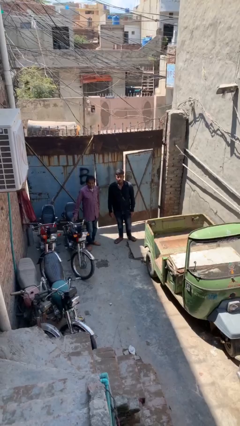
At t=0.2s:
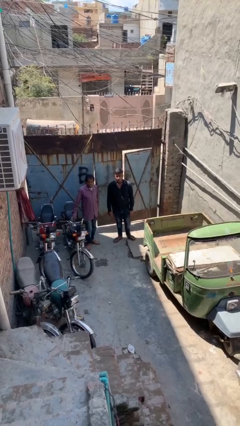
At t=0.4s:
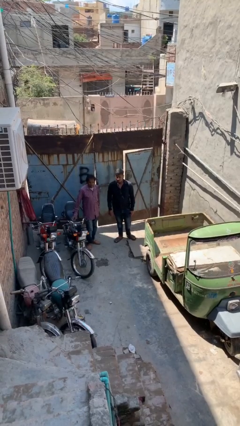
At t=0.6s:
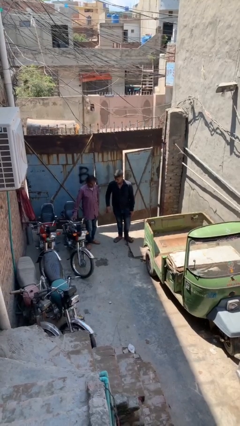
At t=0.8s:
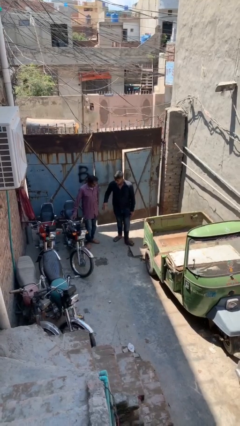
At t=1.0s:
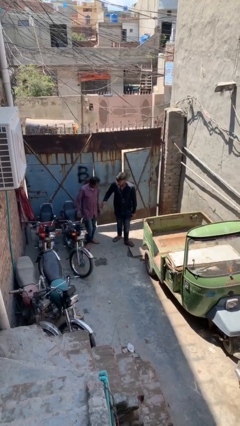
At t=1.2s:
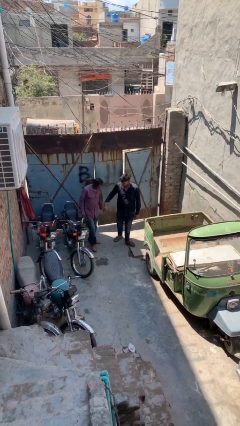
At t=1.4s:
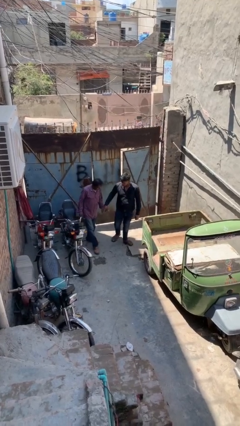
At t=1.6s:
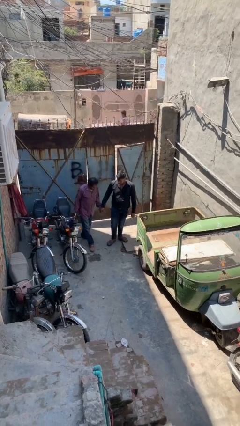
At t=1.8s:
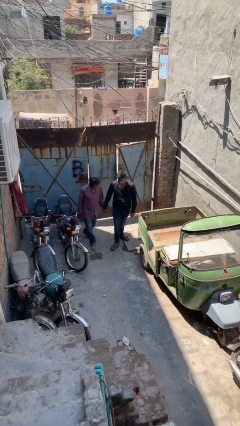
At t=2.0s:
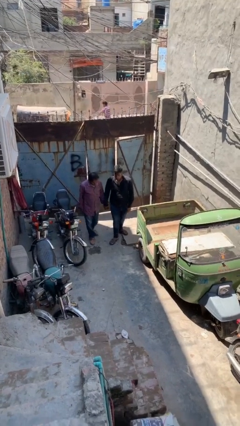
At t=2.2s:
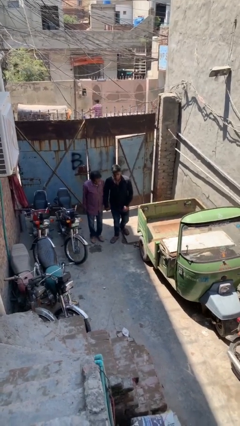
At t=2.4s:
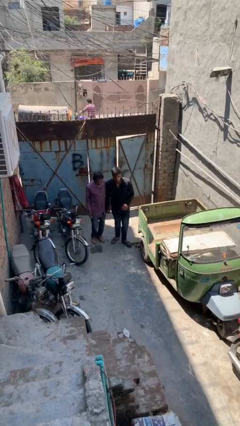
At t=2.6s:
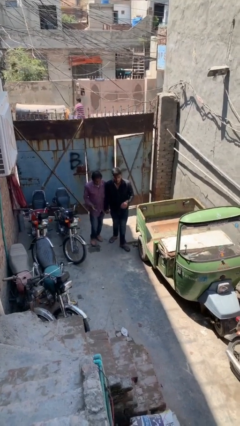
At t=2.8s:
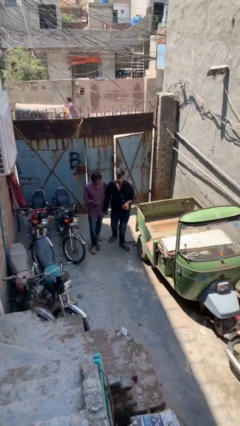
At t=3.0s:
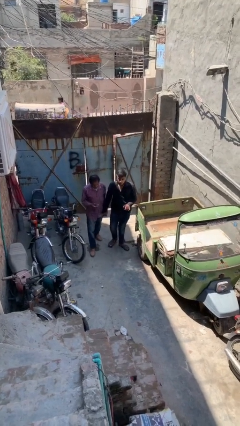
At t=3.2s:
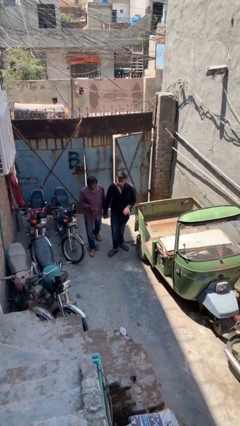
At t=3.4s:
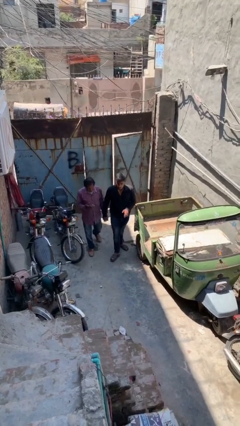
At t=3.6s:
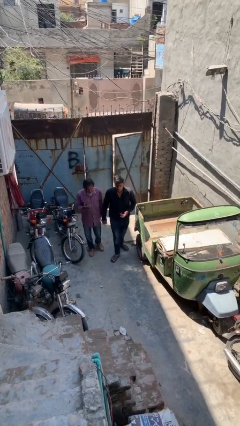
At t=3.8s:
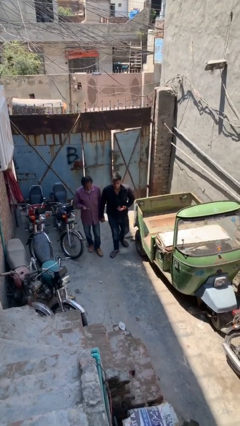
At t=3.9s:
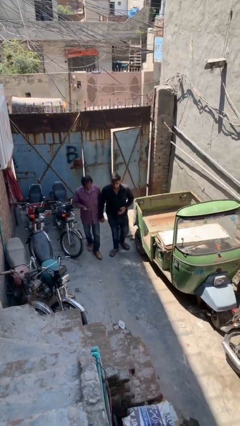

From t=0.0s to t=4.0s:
person holds hand

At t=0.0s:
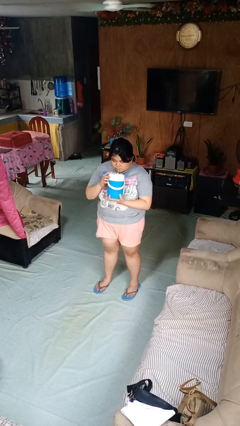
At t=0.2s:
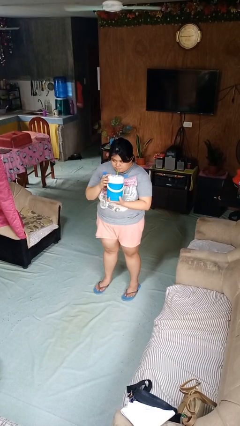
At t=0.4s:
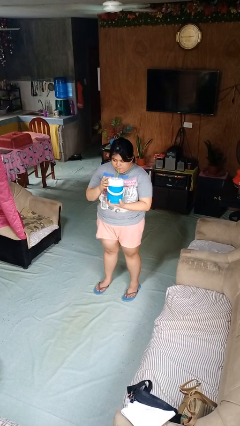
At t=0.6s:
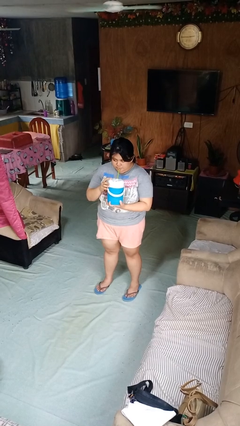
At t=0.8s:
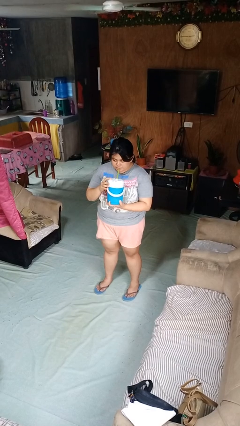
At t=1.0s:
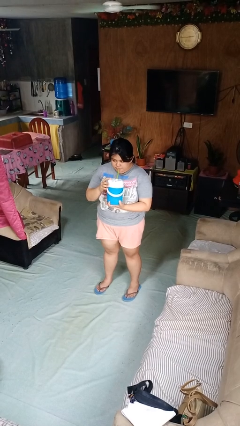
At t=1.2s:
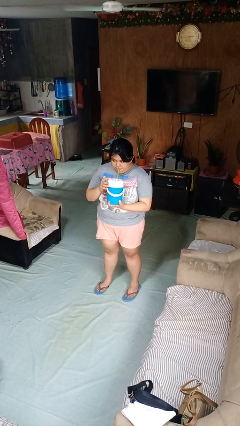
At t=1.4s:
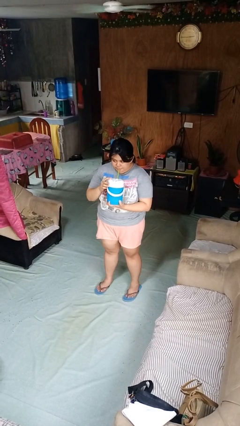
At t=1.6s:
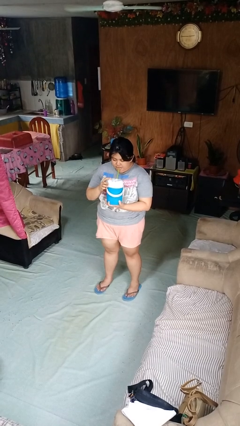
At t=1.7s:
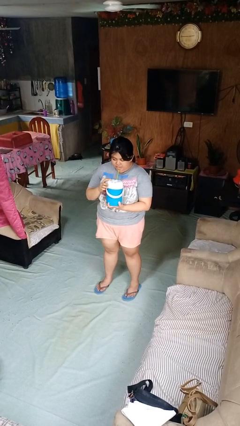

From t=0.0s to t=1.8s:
person drinks from straw

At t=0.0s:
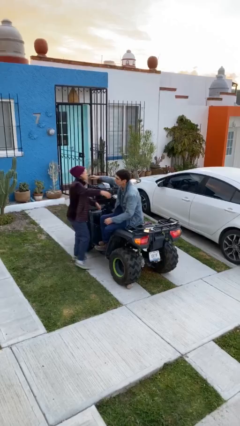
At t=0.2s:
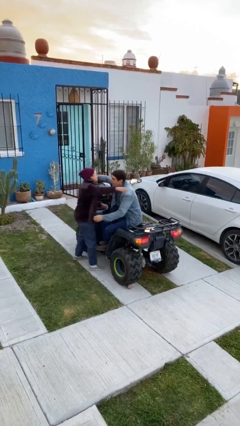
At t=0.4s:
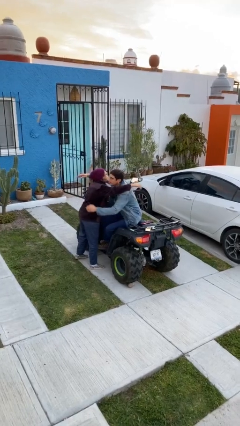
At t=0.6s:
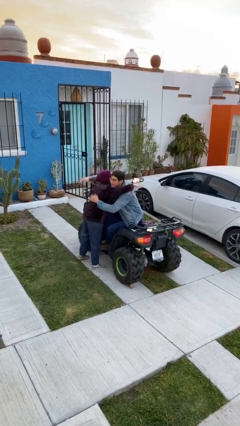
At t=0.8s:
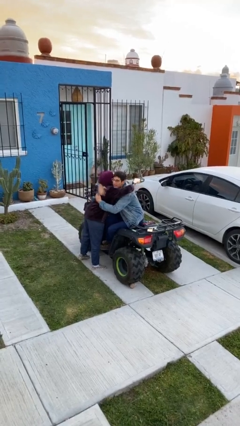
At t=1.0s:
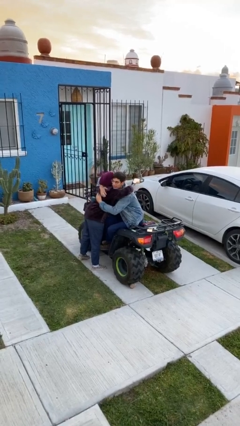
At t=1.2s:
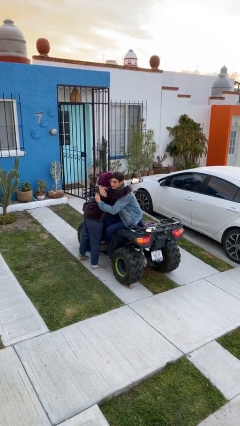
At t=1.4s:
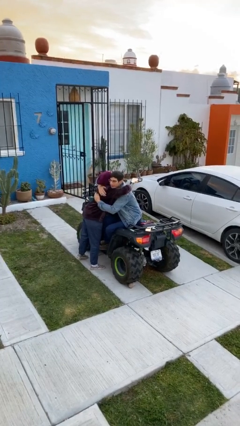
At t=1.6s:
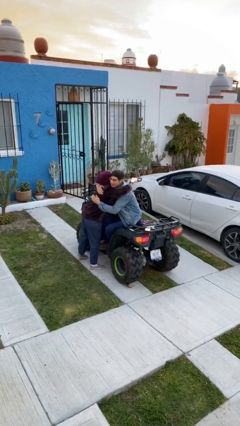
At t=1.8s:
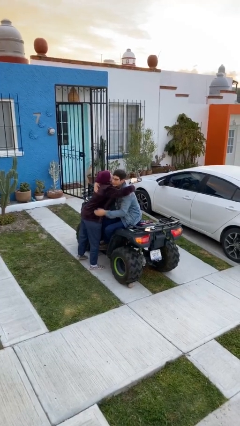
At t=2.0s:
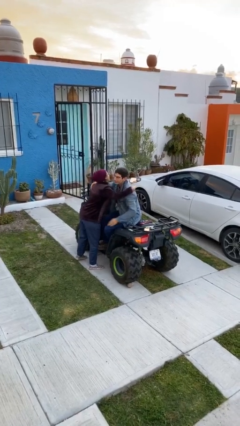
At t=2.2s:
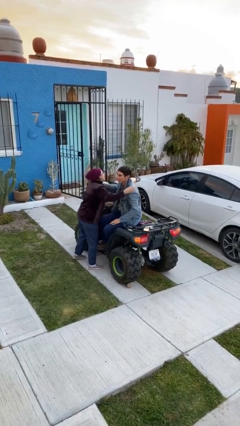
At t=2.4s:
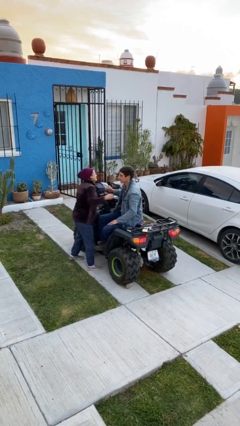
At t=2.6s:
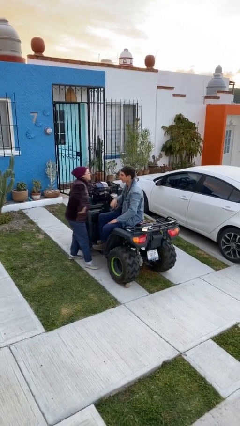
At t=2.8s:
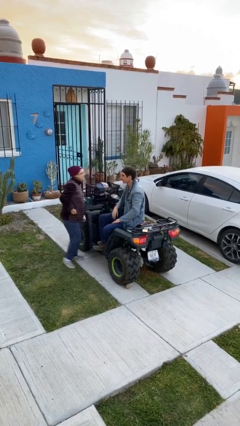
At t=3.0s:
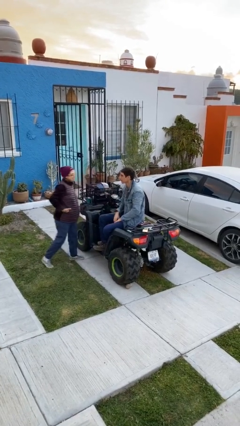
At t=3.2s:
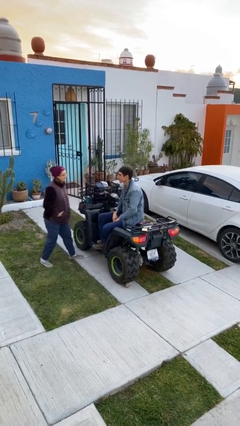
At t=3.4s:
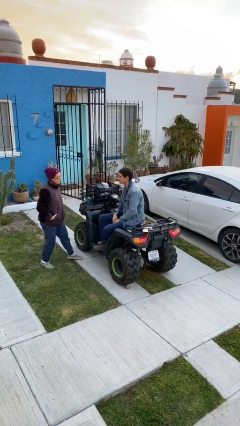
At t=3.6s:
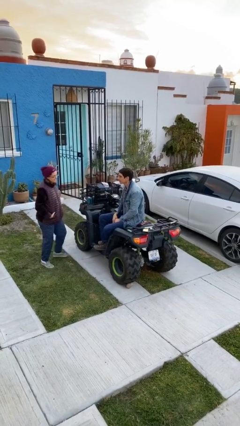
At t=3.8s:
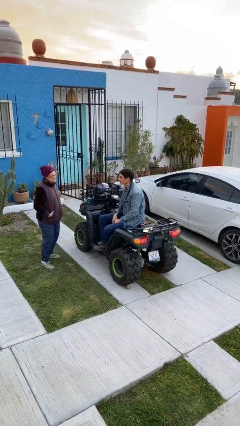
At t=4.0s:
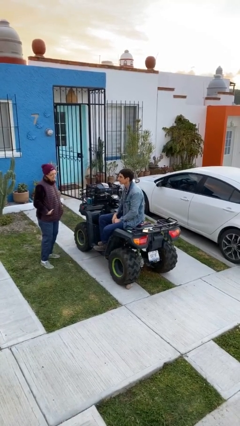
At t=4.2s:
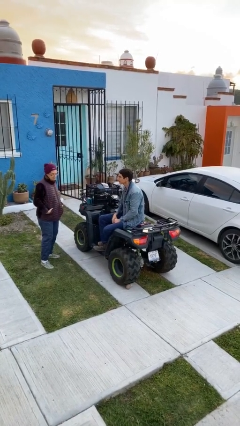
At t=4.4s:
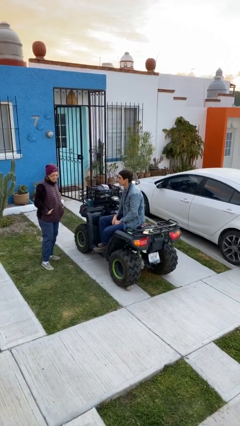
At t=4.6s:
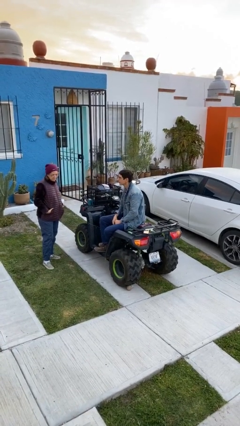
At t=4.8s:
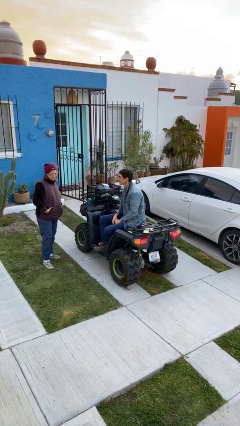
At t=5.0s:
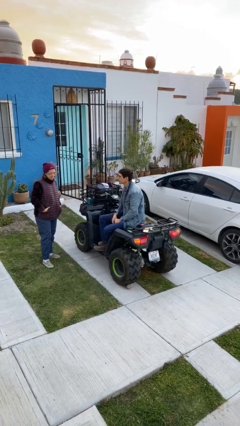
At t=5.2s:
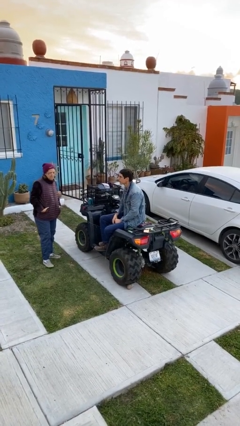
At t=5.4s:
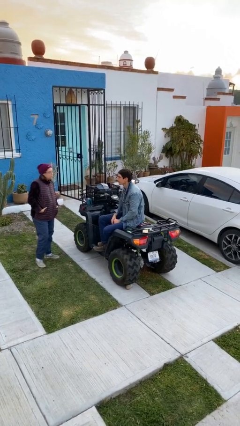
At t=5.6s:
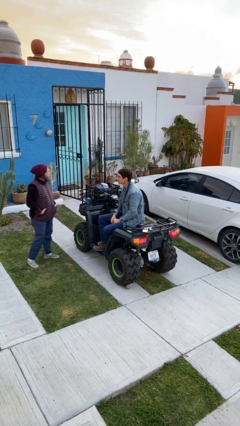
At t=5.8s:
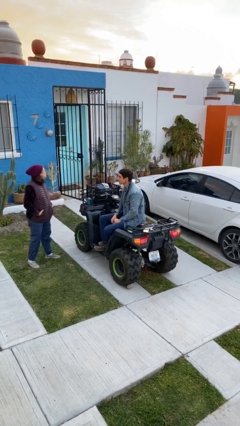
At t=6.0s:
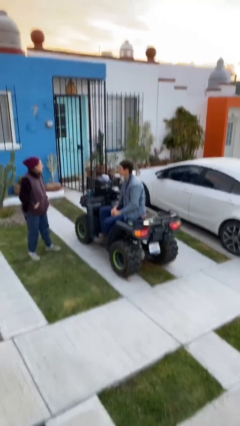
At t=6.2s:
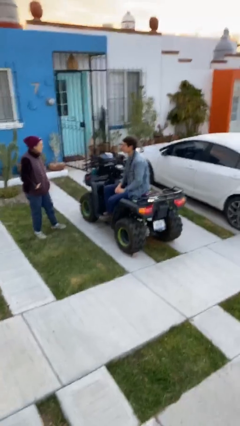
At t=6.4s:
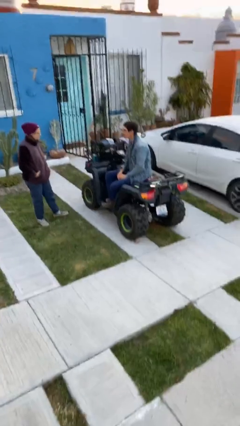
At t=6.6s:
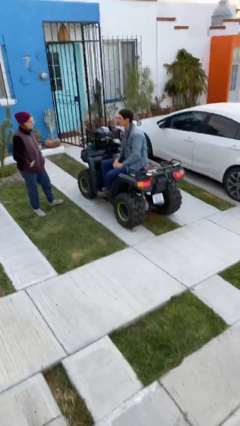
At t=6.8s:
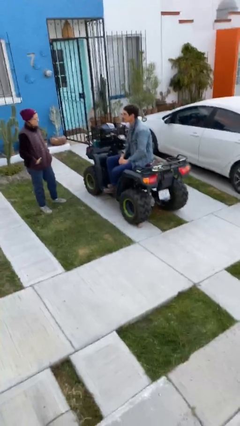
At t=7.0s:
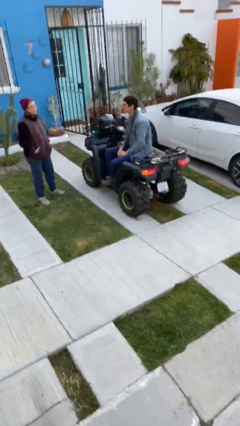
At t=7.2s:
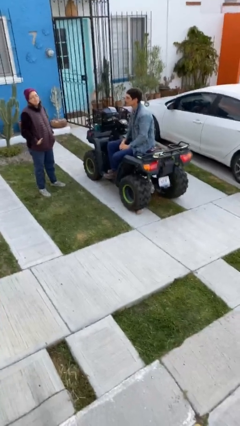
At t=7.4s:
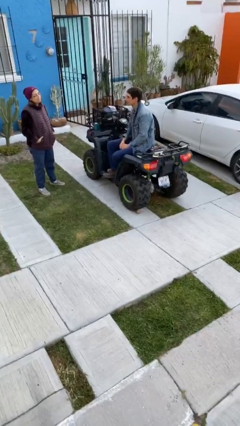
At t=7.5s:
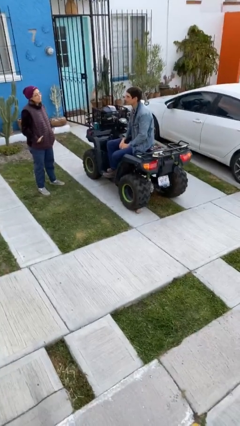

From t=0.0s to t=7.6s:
person embraces person

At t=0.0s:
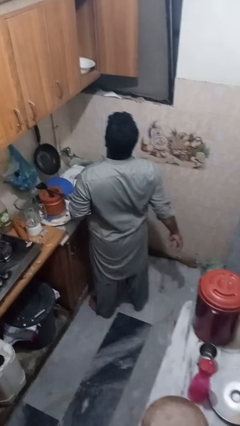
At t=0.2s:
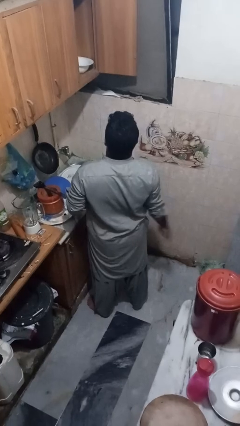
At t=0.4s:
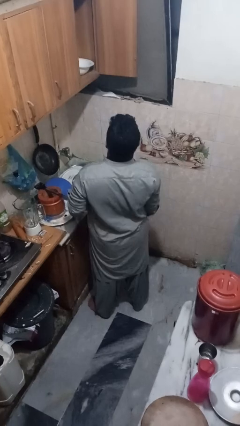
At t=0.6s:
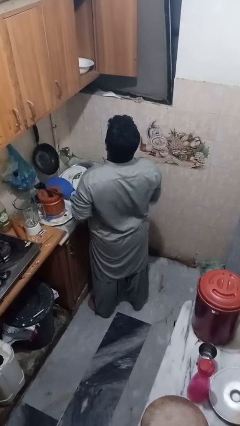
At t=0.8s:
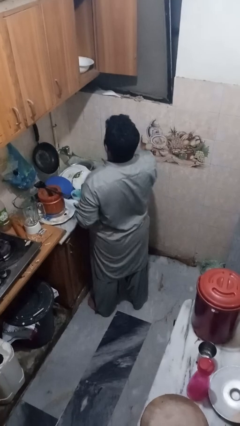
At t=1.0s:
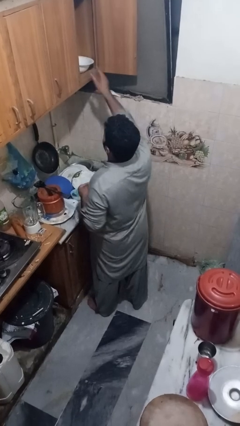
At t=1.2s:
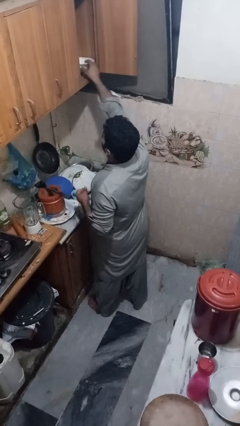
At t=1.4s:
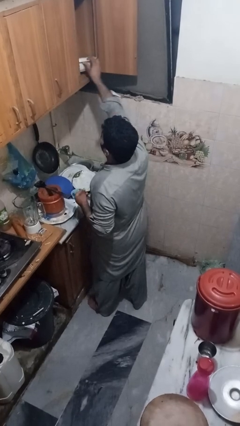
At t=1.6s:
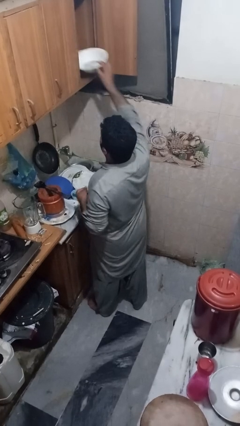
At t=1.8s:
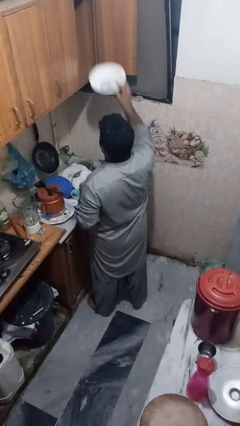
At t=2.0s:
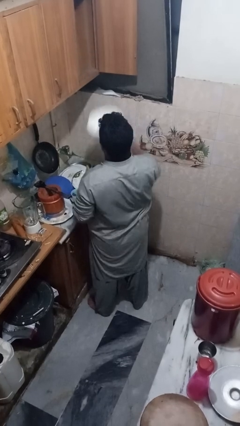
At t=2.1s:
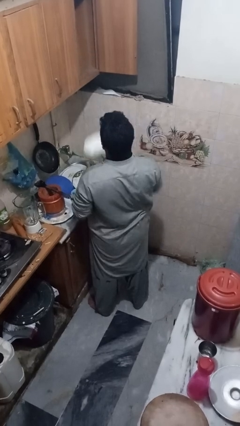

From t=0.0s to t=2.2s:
person takes object from cabinet

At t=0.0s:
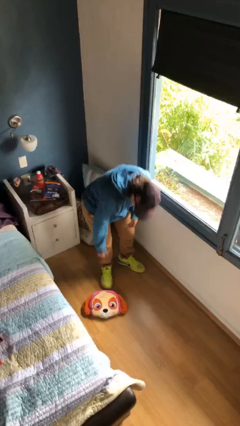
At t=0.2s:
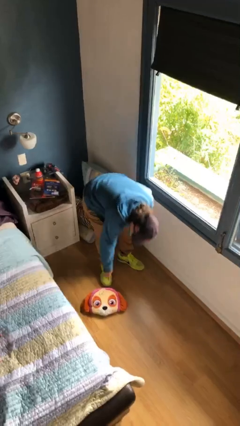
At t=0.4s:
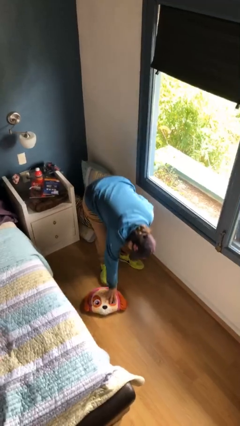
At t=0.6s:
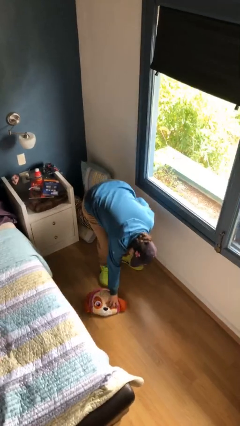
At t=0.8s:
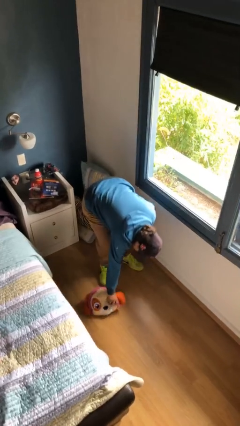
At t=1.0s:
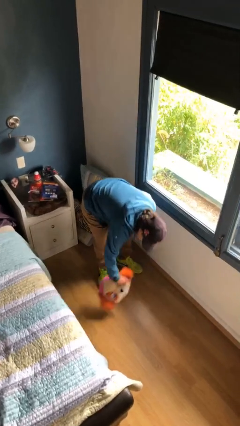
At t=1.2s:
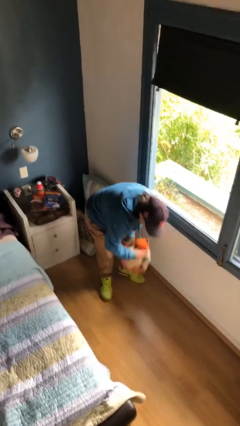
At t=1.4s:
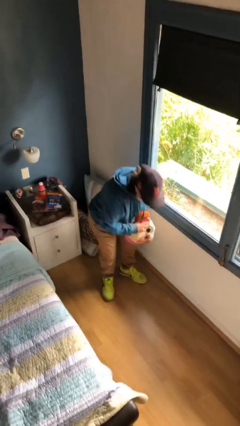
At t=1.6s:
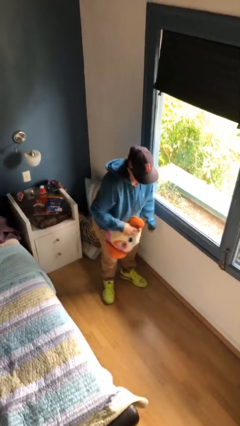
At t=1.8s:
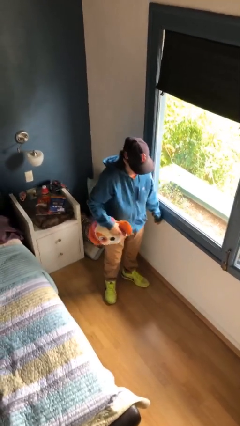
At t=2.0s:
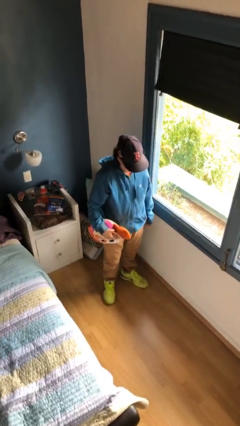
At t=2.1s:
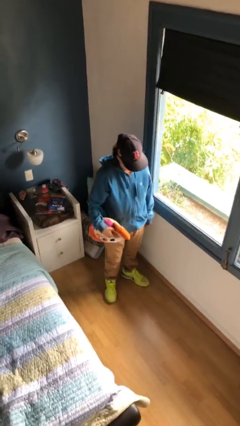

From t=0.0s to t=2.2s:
person picks up object from floor
